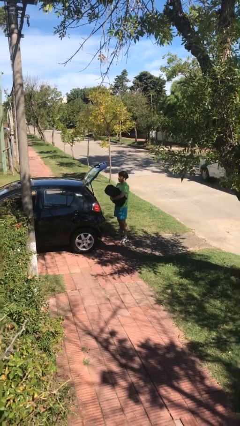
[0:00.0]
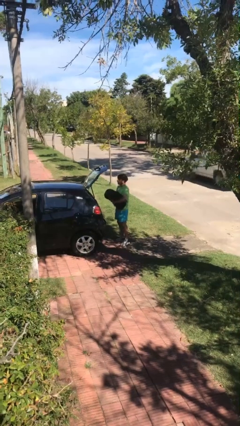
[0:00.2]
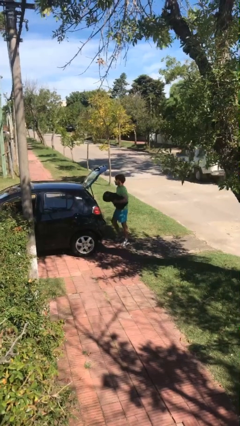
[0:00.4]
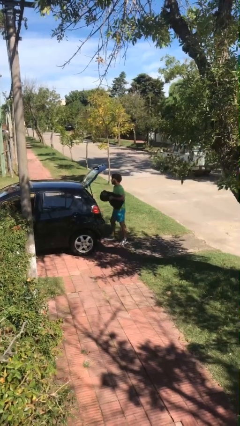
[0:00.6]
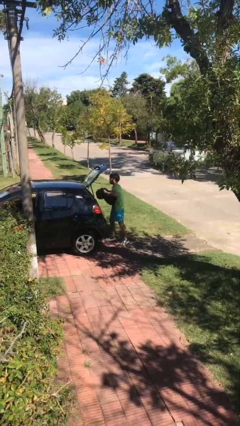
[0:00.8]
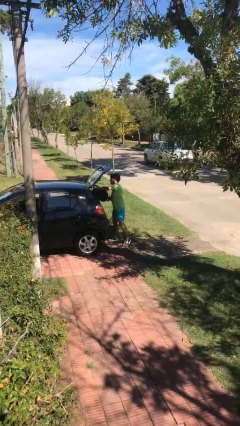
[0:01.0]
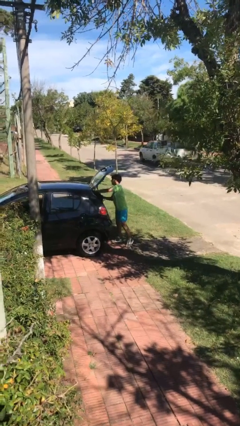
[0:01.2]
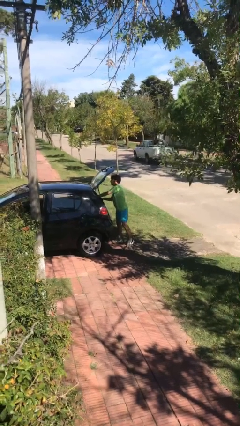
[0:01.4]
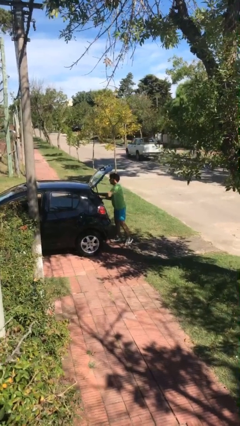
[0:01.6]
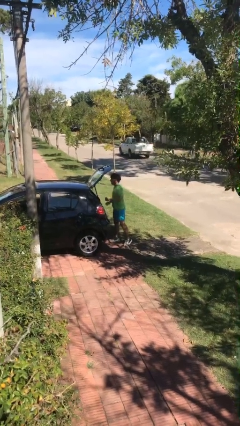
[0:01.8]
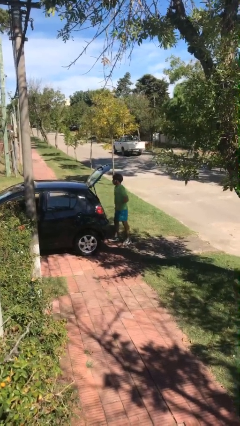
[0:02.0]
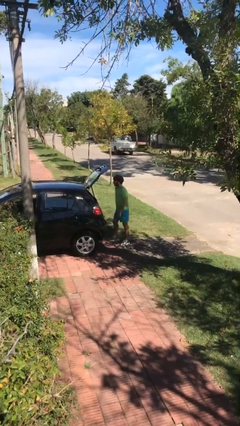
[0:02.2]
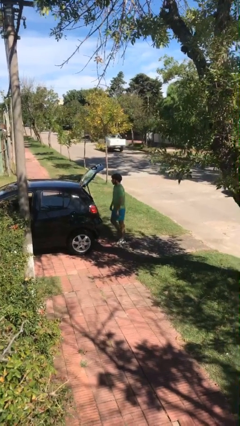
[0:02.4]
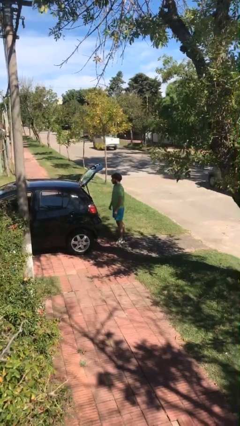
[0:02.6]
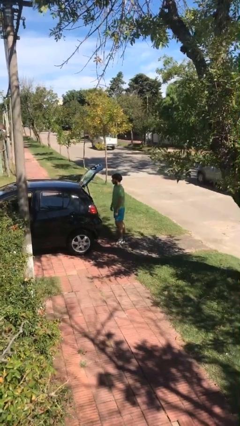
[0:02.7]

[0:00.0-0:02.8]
person loads car

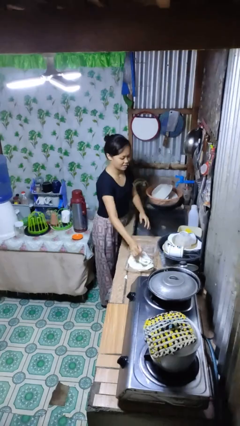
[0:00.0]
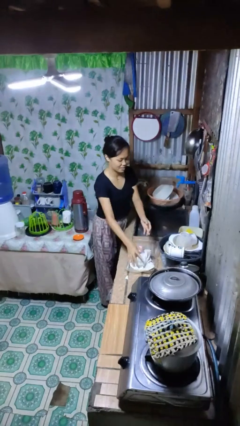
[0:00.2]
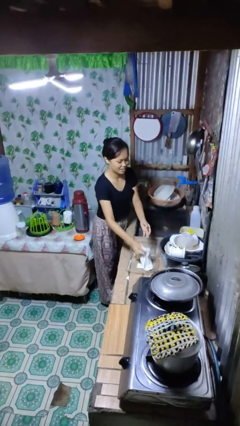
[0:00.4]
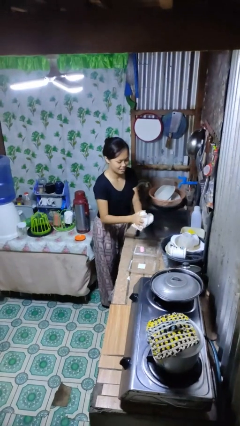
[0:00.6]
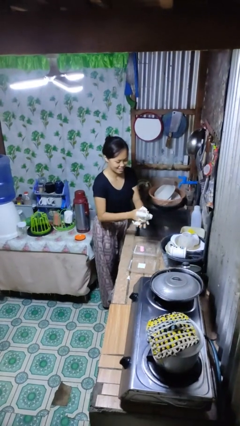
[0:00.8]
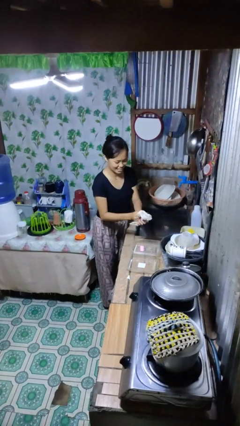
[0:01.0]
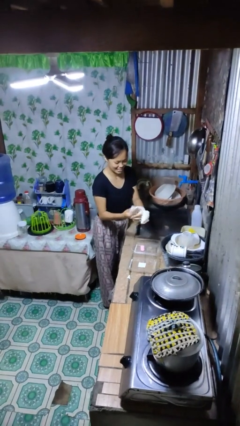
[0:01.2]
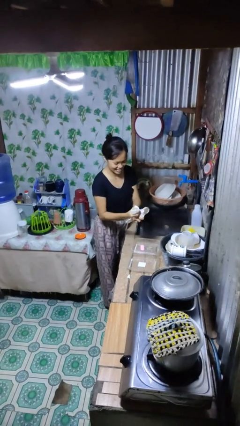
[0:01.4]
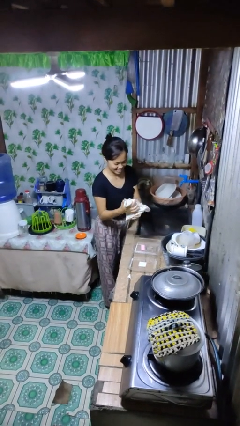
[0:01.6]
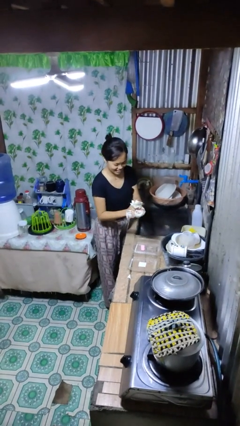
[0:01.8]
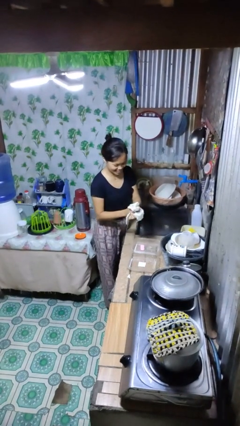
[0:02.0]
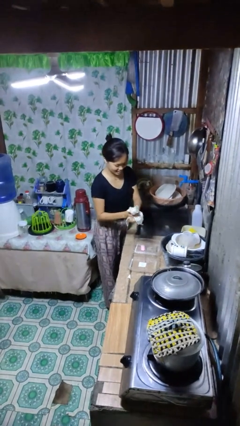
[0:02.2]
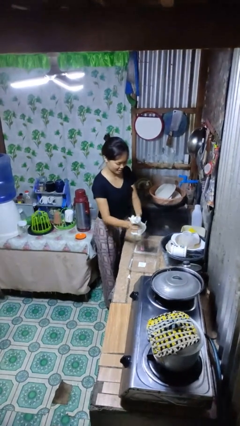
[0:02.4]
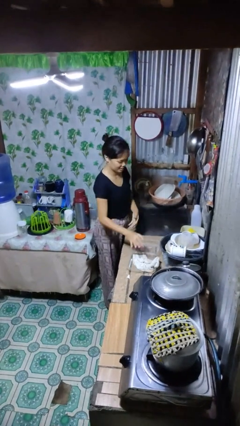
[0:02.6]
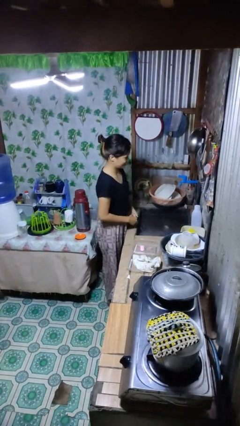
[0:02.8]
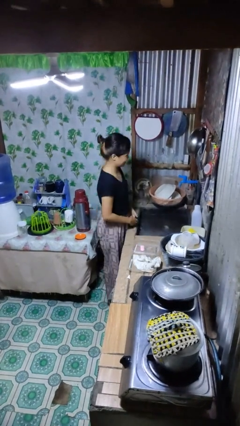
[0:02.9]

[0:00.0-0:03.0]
person dries hands with towel

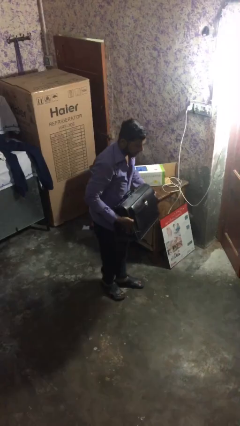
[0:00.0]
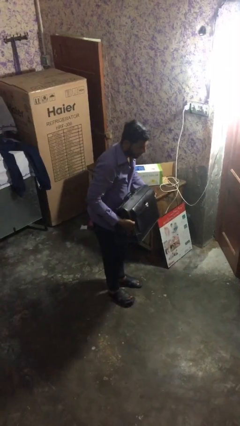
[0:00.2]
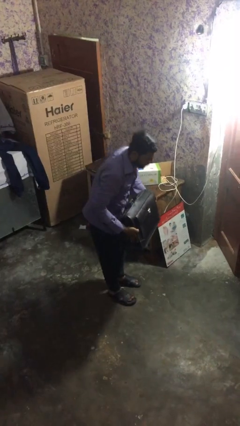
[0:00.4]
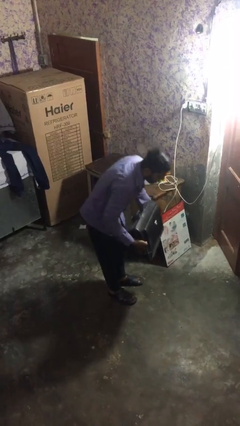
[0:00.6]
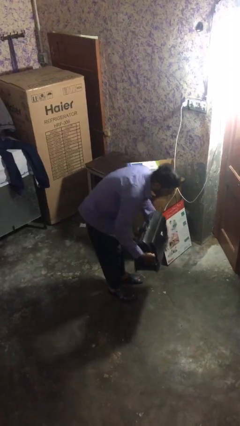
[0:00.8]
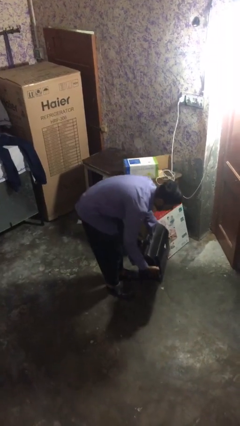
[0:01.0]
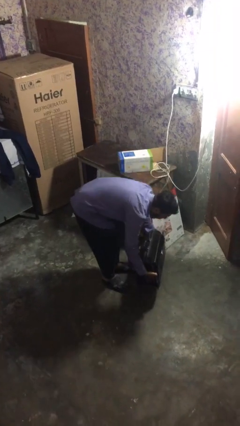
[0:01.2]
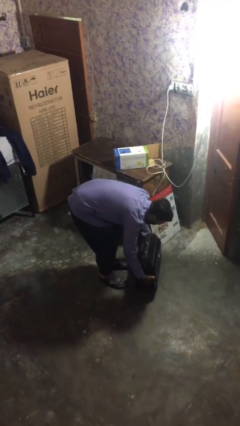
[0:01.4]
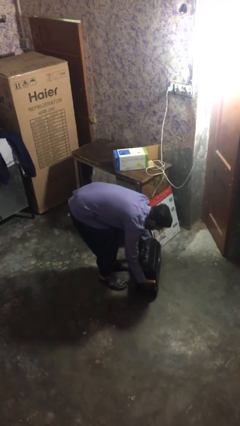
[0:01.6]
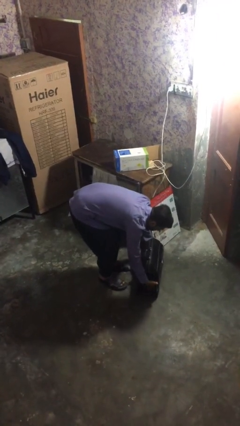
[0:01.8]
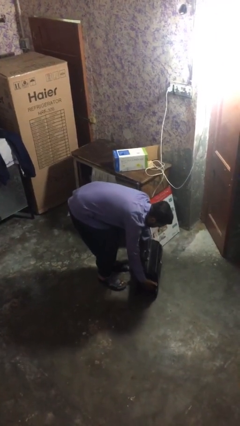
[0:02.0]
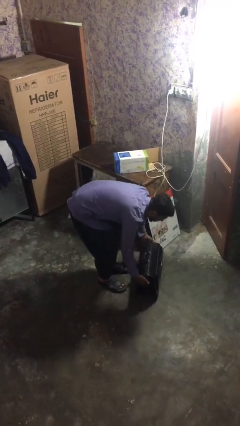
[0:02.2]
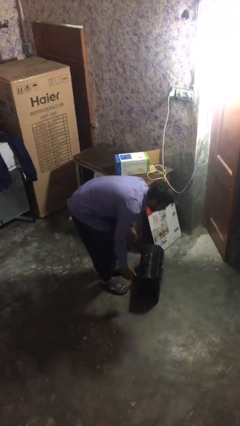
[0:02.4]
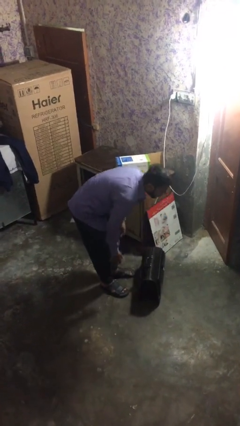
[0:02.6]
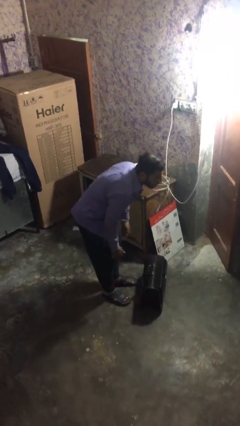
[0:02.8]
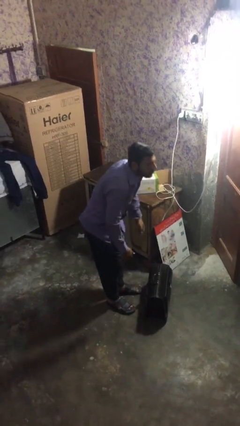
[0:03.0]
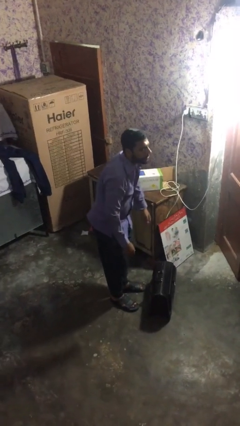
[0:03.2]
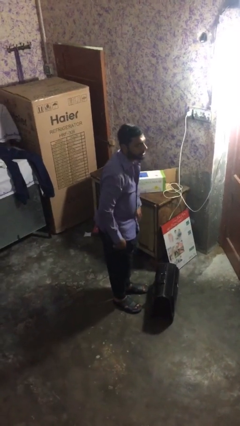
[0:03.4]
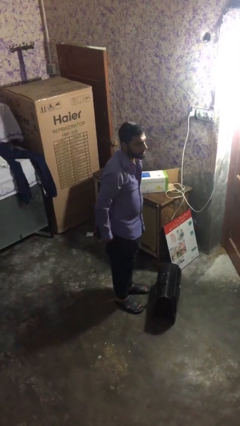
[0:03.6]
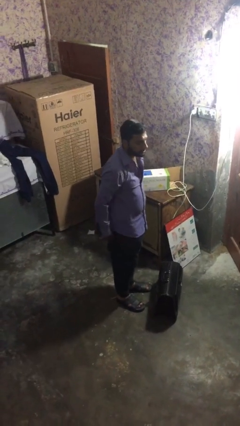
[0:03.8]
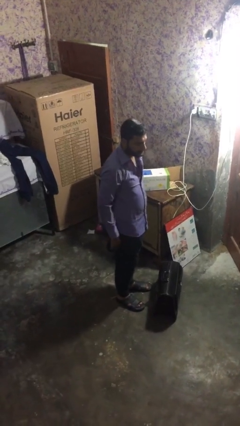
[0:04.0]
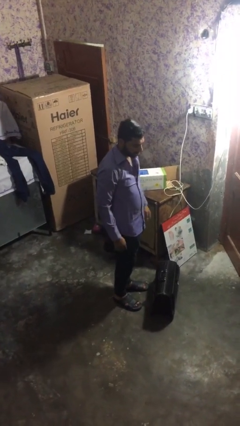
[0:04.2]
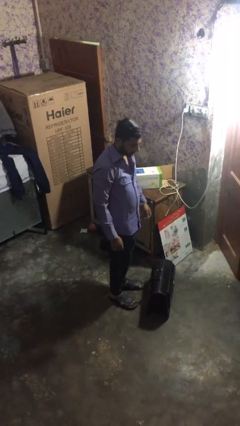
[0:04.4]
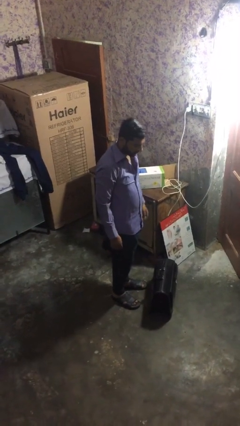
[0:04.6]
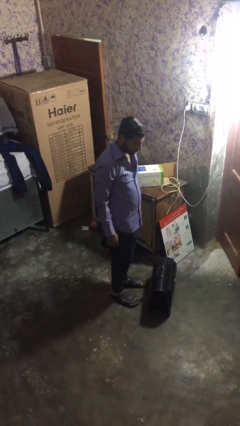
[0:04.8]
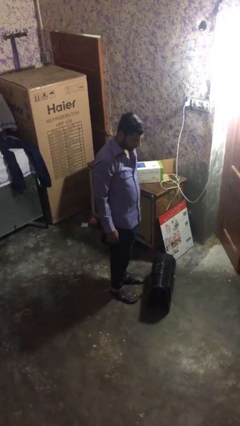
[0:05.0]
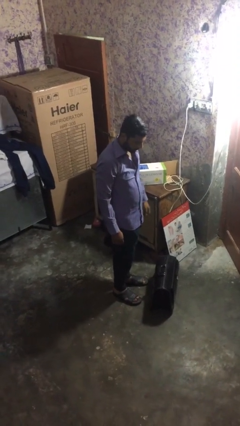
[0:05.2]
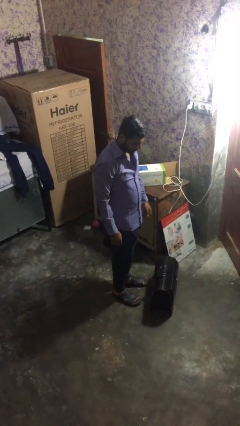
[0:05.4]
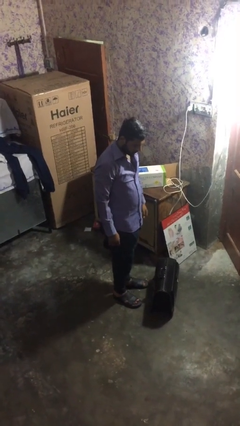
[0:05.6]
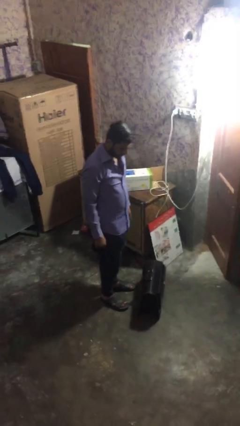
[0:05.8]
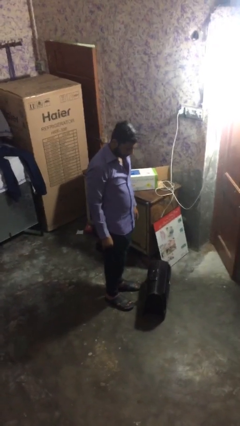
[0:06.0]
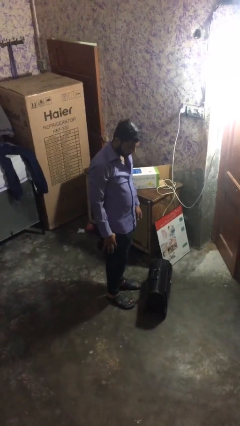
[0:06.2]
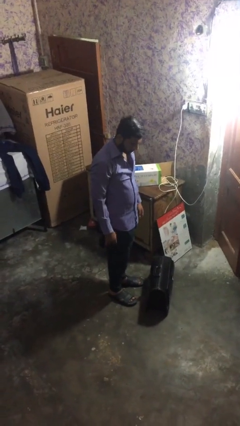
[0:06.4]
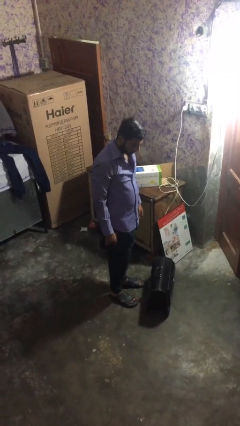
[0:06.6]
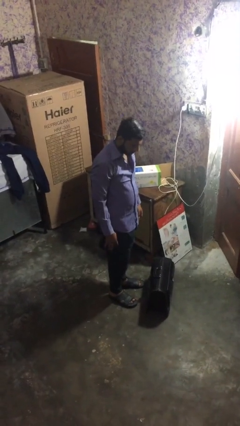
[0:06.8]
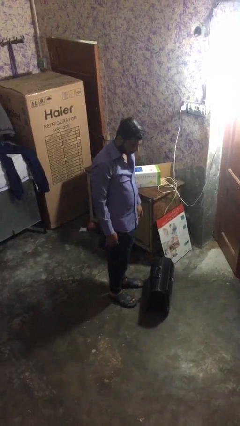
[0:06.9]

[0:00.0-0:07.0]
person puts down object on floor

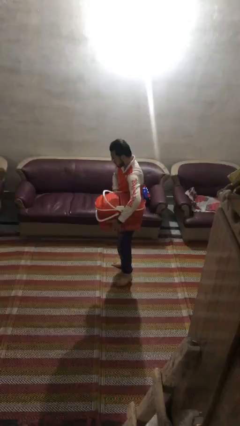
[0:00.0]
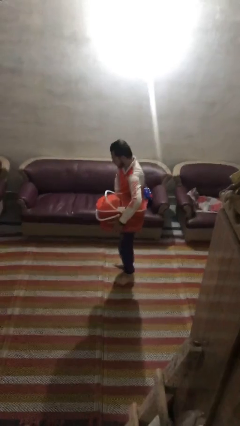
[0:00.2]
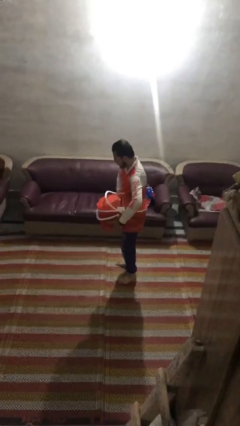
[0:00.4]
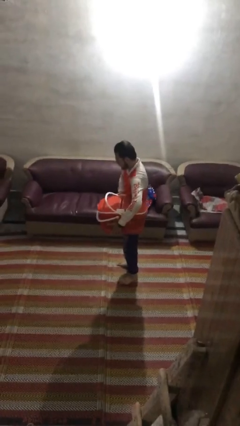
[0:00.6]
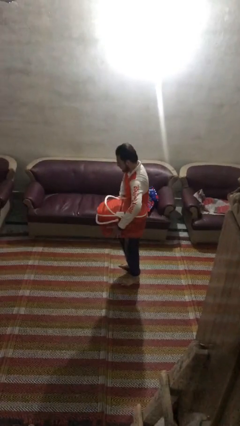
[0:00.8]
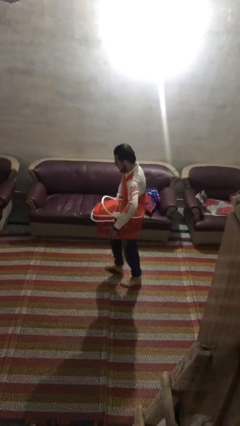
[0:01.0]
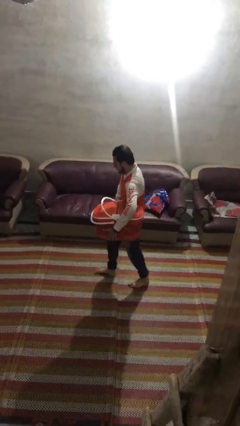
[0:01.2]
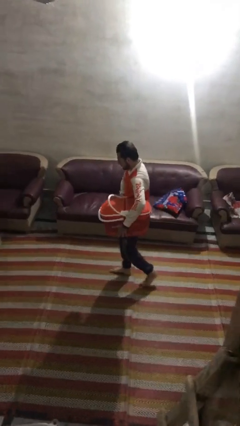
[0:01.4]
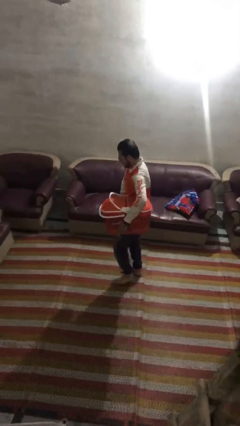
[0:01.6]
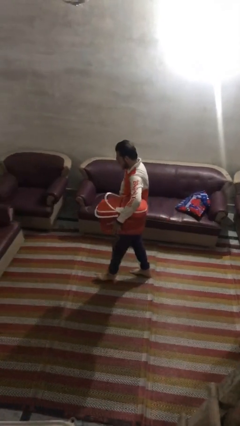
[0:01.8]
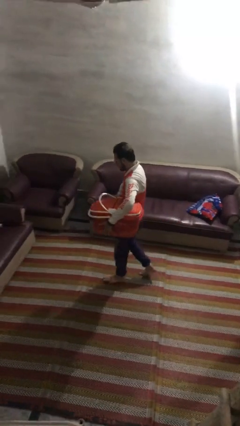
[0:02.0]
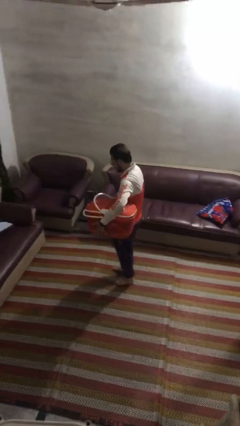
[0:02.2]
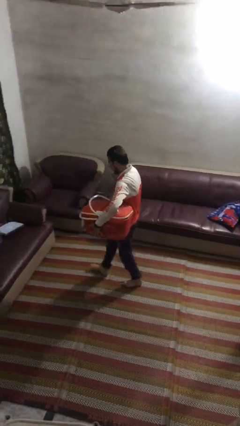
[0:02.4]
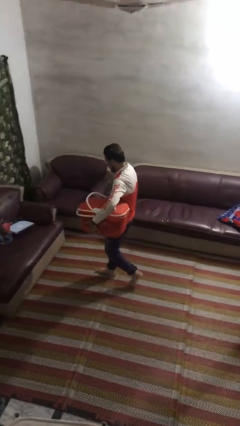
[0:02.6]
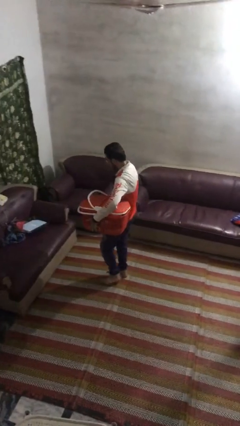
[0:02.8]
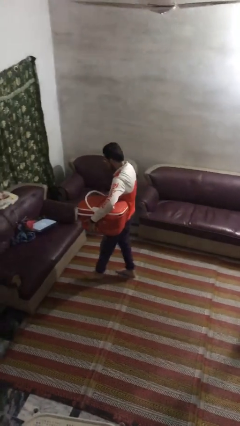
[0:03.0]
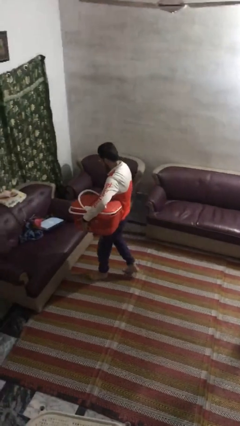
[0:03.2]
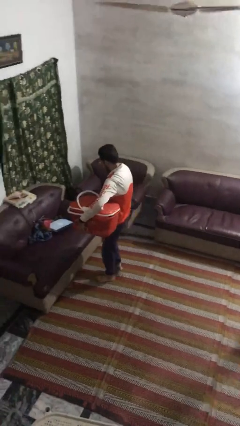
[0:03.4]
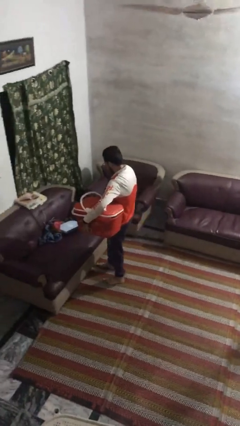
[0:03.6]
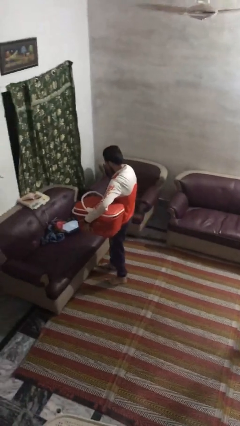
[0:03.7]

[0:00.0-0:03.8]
person carries laundry basket

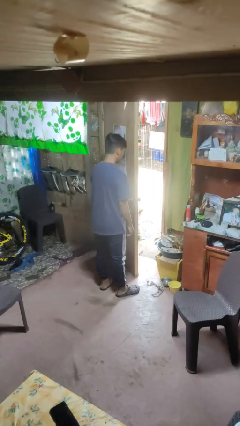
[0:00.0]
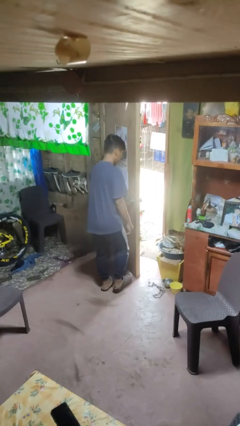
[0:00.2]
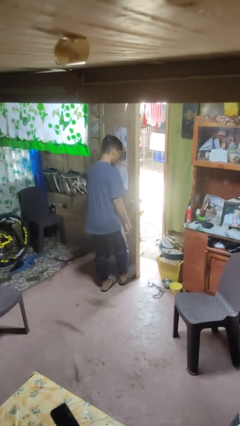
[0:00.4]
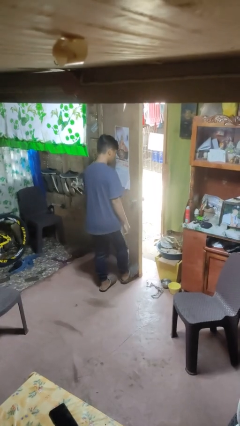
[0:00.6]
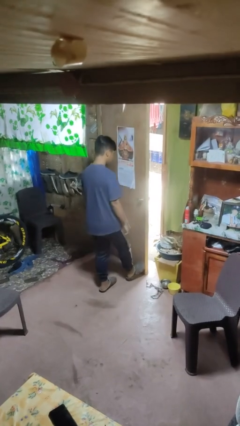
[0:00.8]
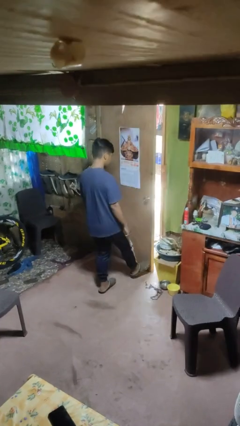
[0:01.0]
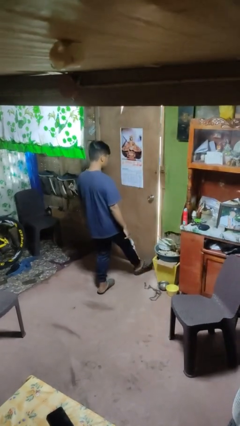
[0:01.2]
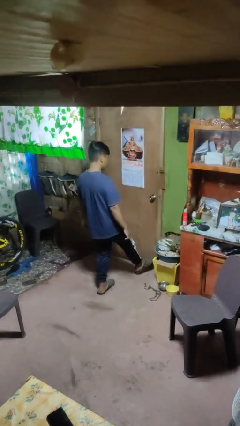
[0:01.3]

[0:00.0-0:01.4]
person closes door with foot
